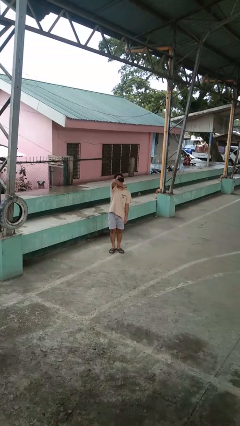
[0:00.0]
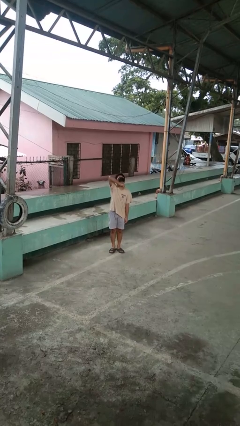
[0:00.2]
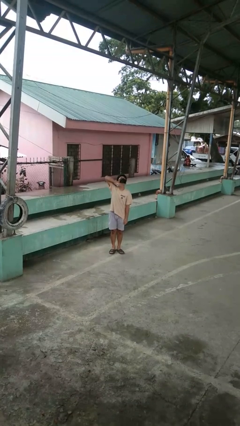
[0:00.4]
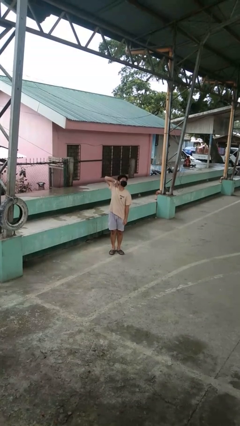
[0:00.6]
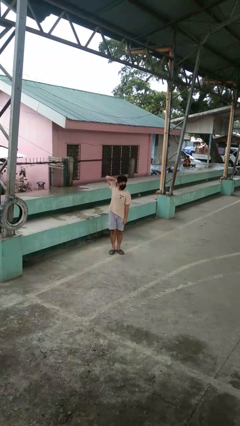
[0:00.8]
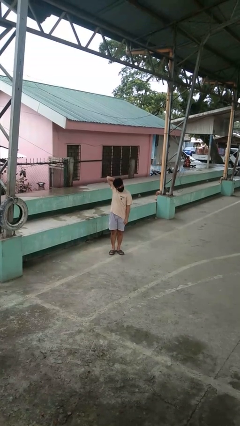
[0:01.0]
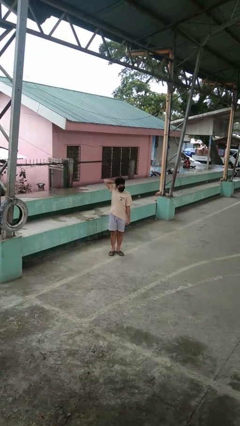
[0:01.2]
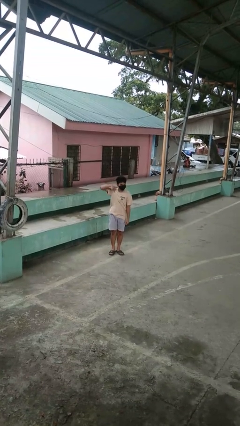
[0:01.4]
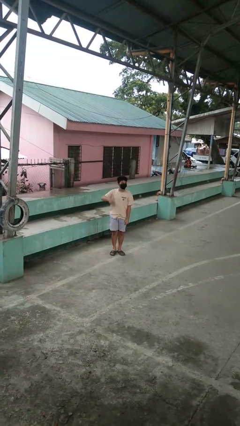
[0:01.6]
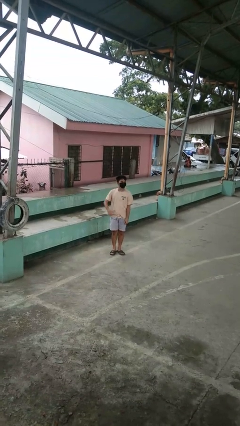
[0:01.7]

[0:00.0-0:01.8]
person gestures cut

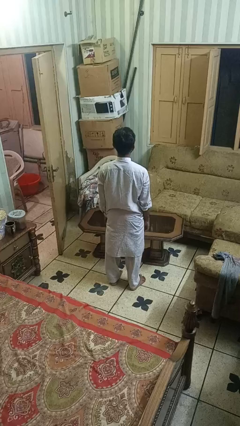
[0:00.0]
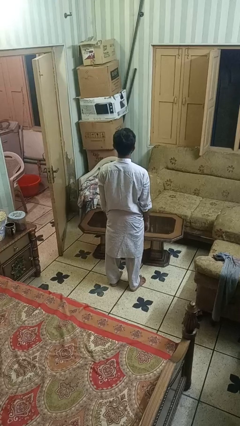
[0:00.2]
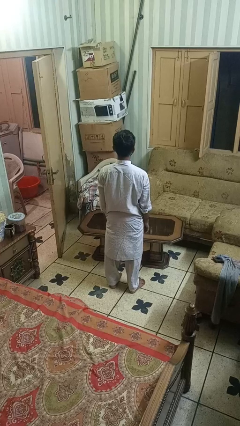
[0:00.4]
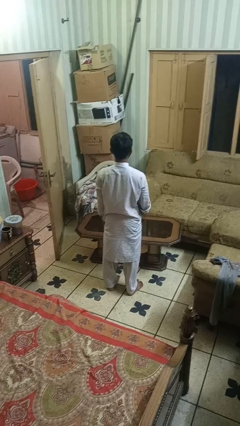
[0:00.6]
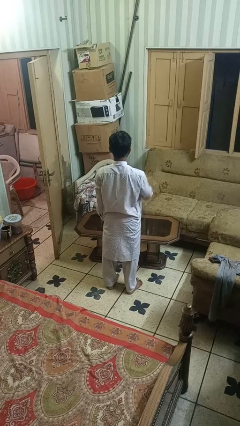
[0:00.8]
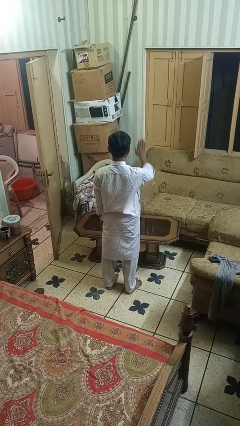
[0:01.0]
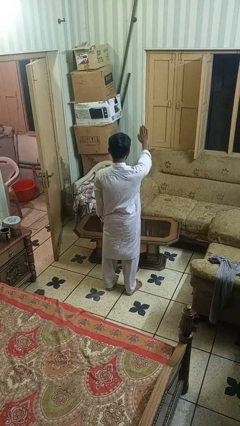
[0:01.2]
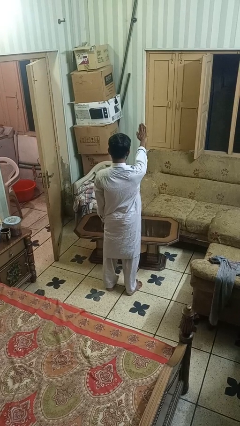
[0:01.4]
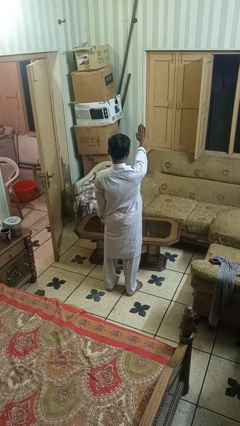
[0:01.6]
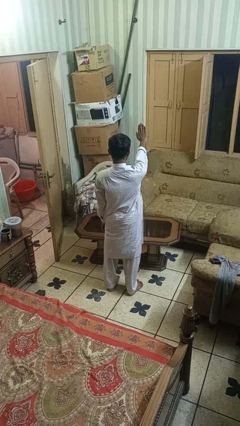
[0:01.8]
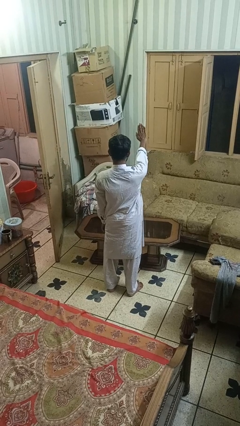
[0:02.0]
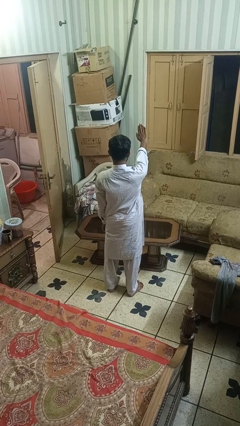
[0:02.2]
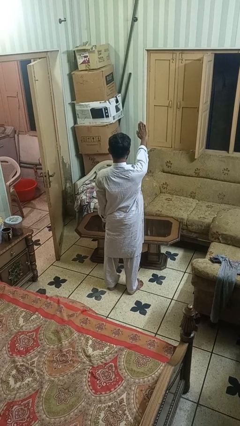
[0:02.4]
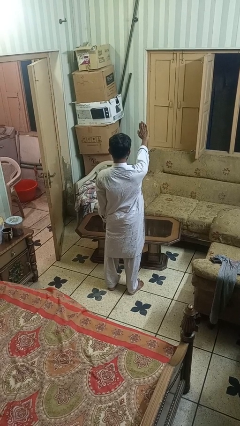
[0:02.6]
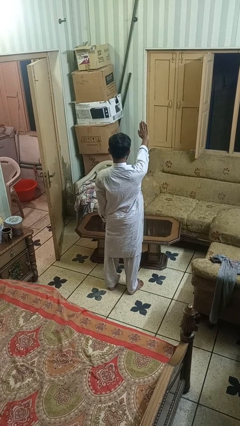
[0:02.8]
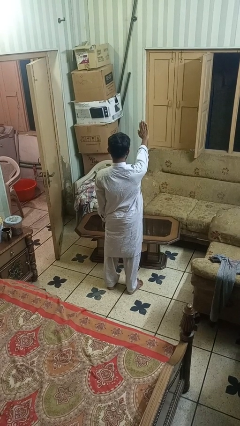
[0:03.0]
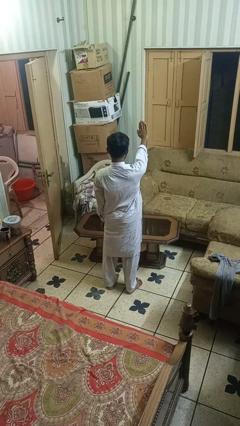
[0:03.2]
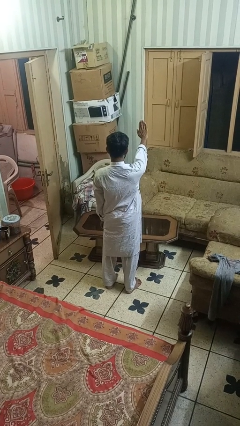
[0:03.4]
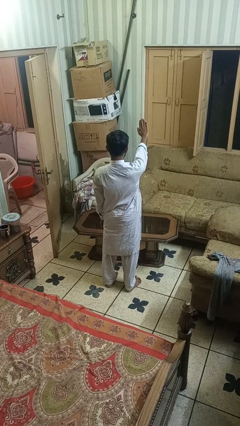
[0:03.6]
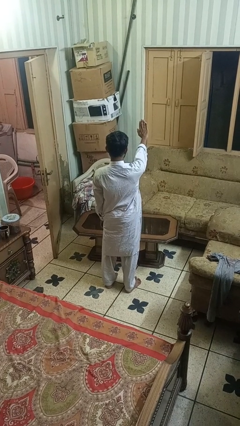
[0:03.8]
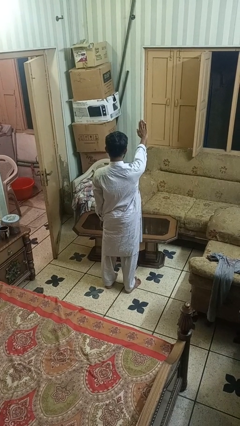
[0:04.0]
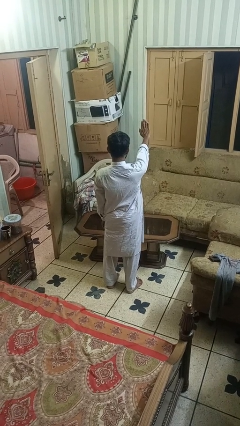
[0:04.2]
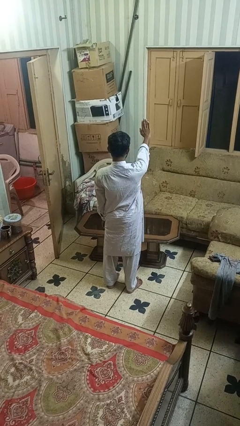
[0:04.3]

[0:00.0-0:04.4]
person gestures stop

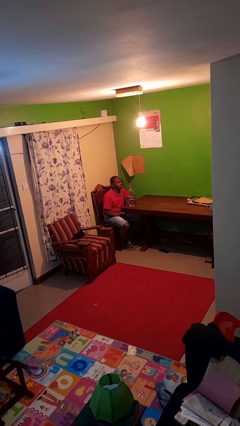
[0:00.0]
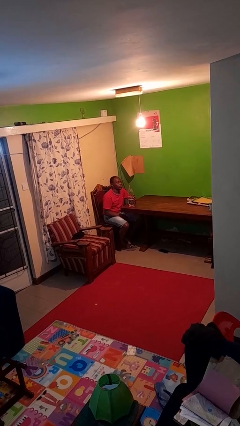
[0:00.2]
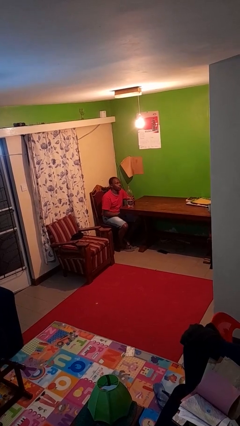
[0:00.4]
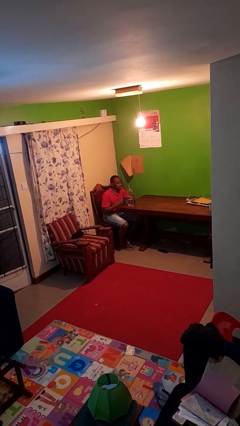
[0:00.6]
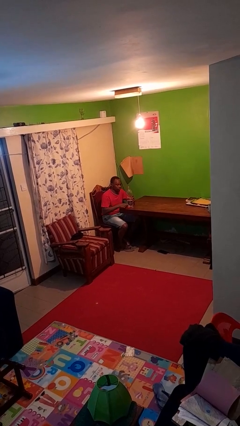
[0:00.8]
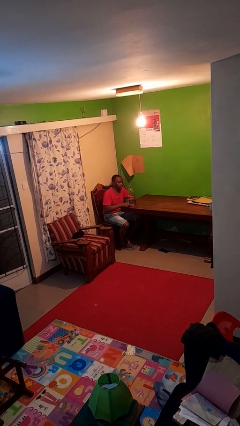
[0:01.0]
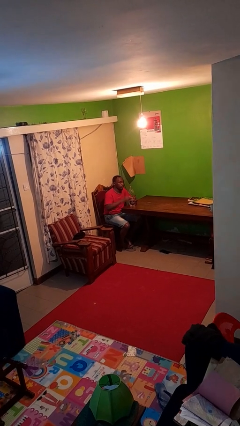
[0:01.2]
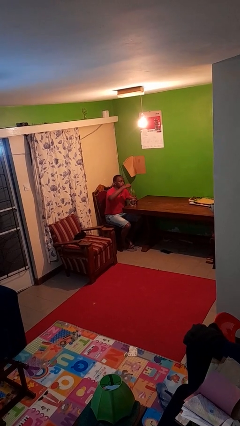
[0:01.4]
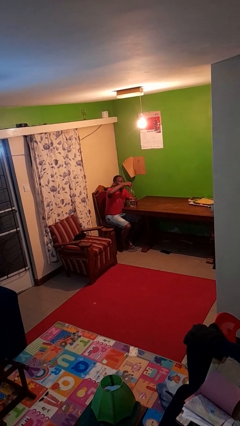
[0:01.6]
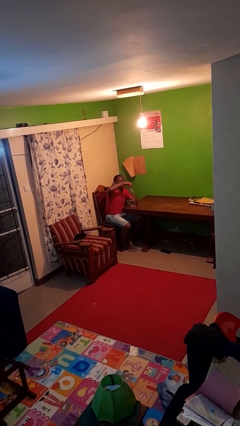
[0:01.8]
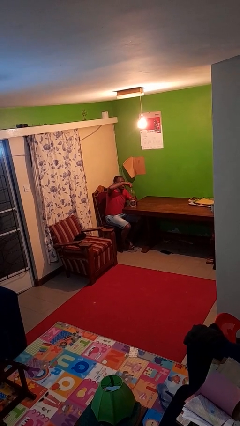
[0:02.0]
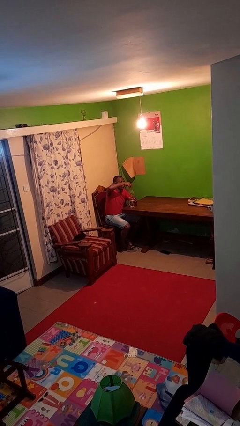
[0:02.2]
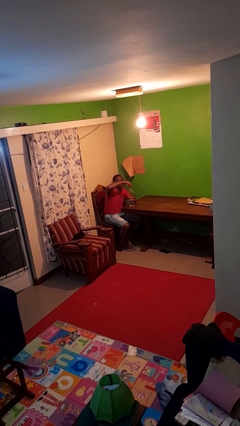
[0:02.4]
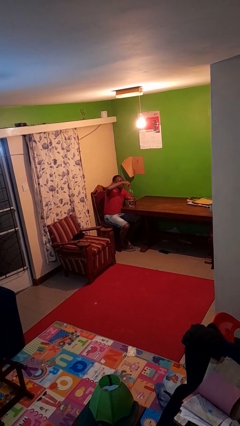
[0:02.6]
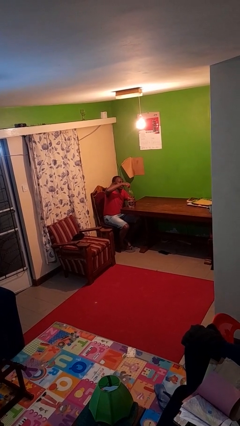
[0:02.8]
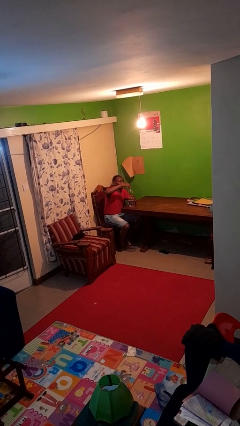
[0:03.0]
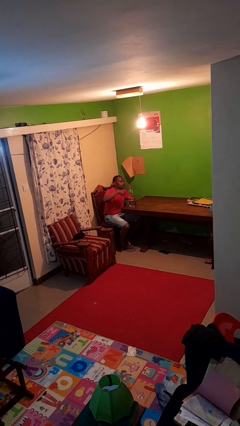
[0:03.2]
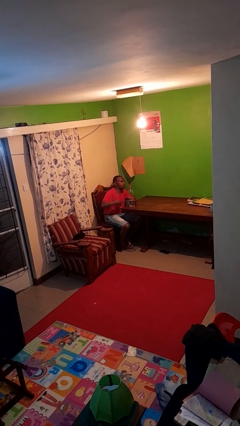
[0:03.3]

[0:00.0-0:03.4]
person screws lid to bottle

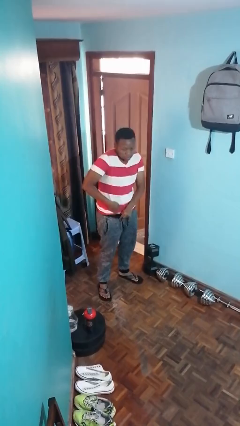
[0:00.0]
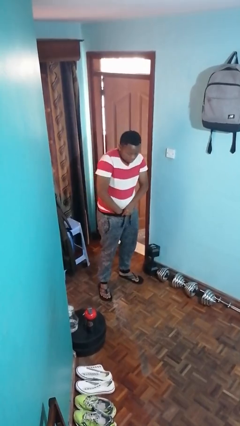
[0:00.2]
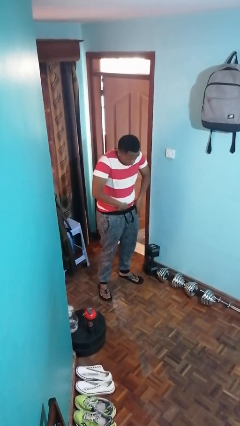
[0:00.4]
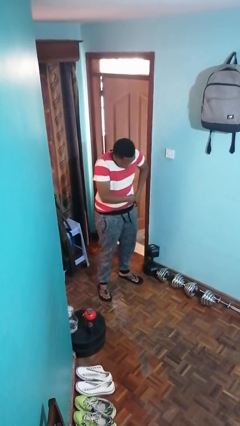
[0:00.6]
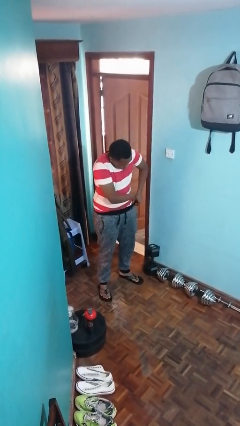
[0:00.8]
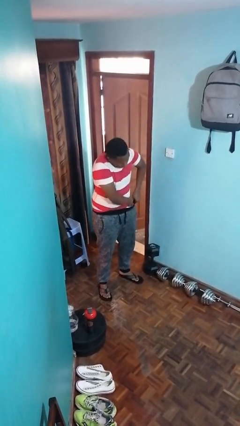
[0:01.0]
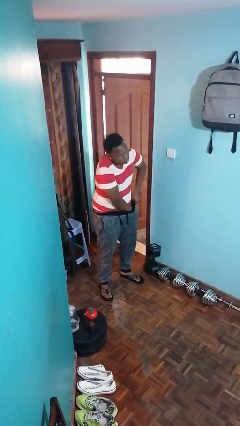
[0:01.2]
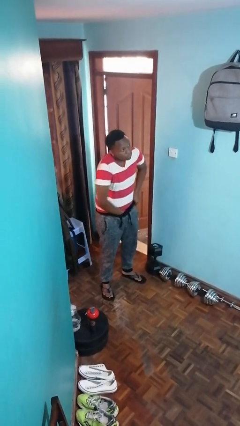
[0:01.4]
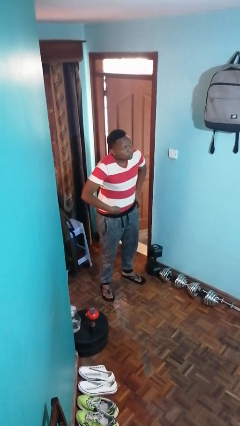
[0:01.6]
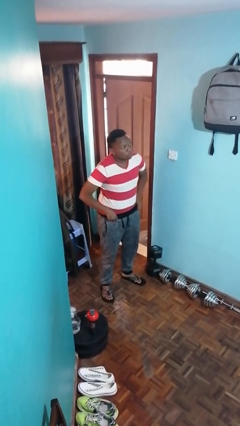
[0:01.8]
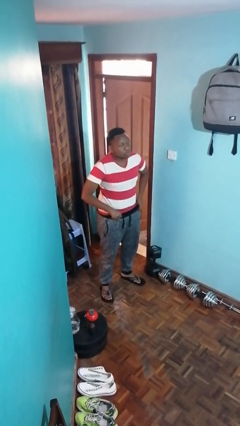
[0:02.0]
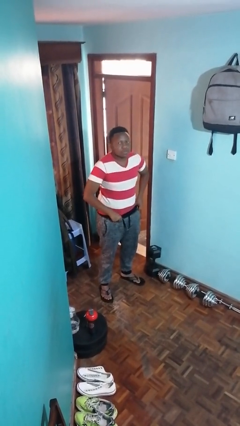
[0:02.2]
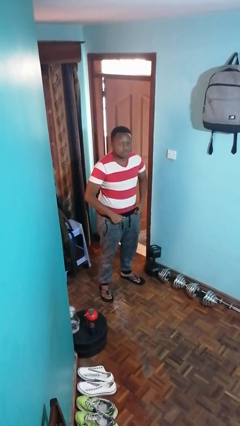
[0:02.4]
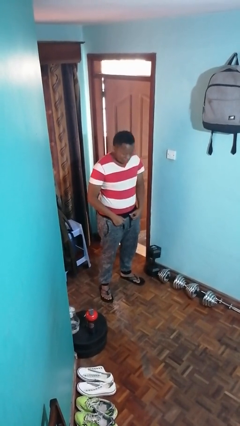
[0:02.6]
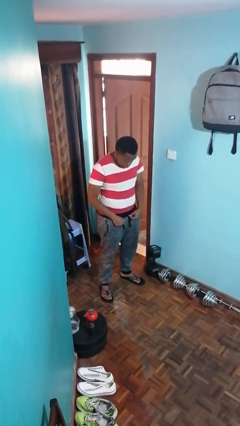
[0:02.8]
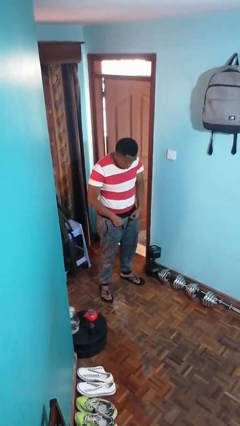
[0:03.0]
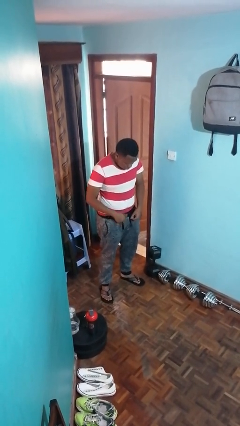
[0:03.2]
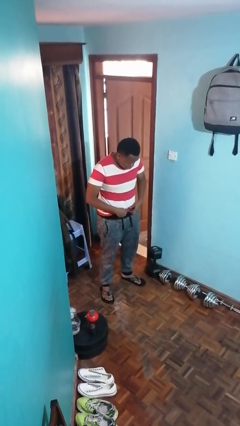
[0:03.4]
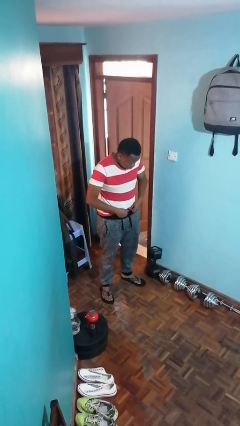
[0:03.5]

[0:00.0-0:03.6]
person tucks in shirt

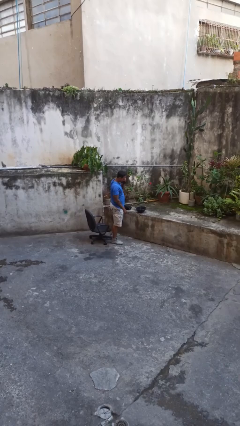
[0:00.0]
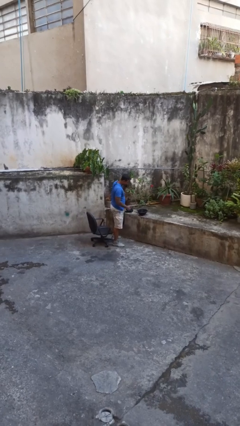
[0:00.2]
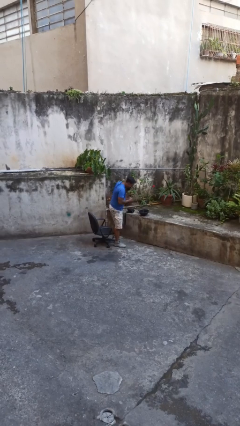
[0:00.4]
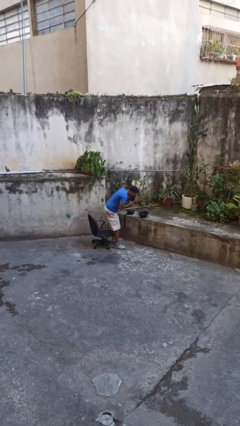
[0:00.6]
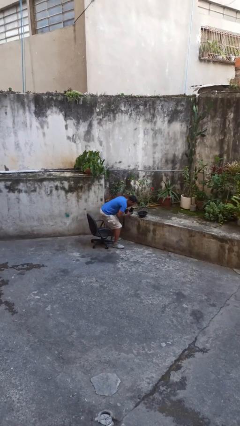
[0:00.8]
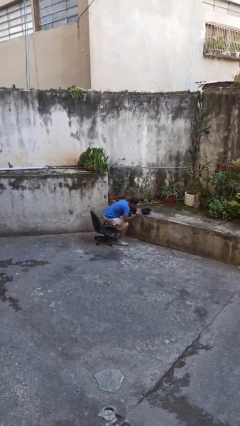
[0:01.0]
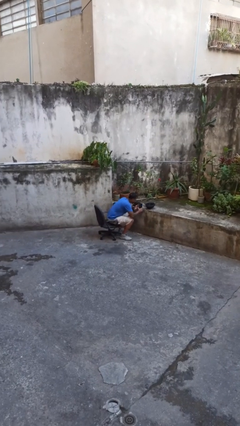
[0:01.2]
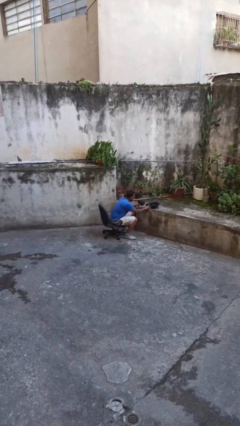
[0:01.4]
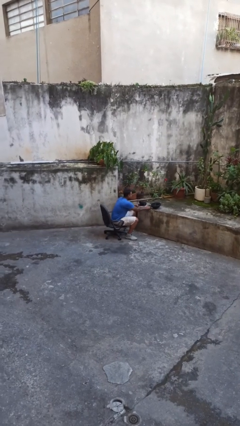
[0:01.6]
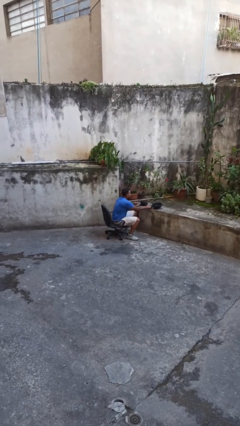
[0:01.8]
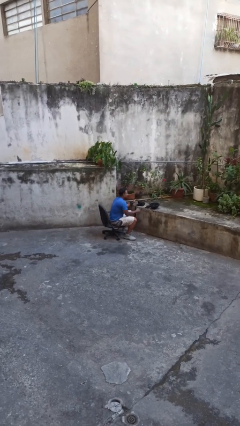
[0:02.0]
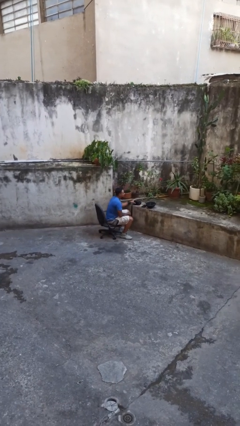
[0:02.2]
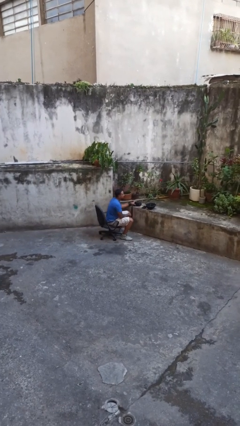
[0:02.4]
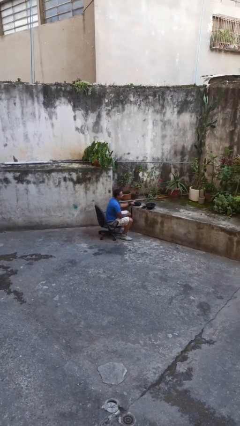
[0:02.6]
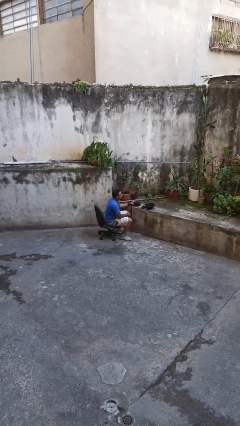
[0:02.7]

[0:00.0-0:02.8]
person sits down

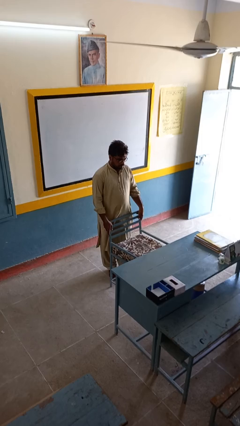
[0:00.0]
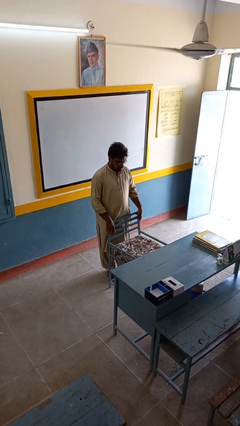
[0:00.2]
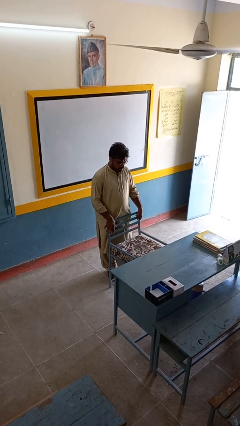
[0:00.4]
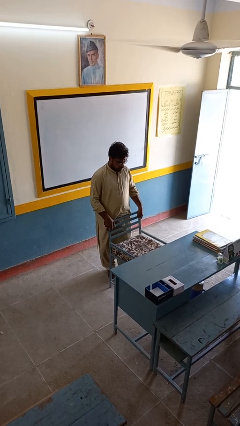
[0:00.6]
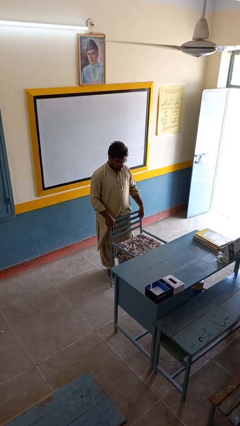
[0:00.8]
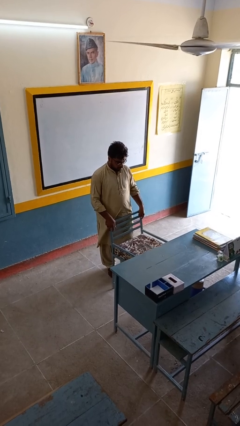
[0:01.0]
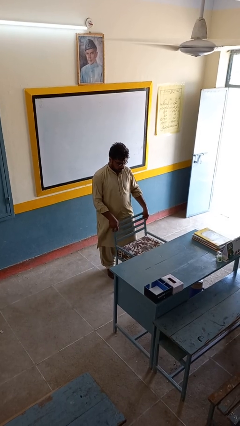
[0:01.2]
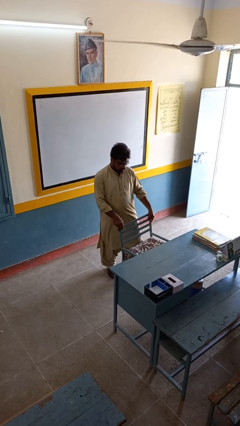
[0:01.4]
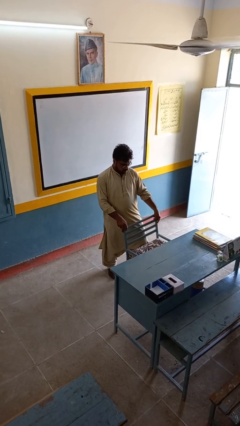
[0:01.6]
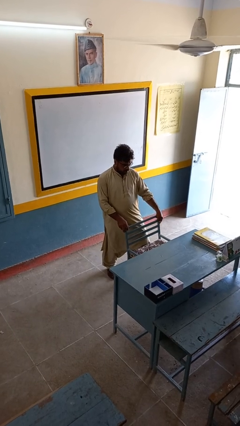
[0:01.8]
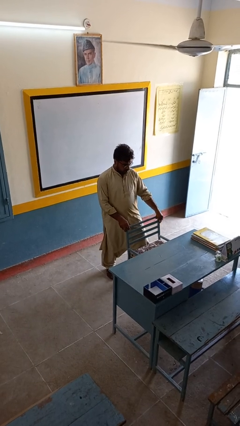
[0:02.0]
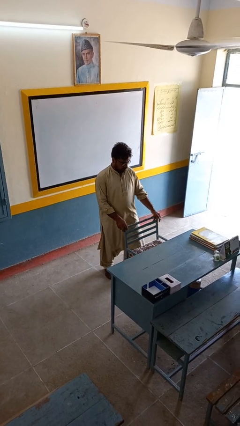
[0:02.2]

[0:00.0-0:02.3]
person pushes in chair
